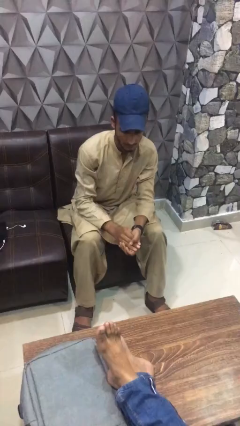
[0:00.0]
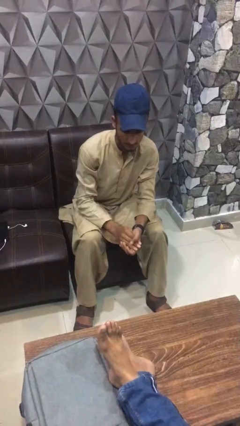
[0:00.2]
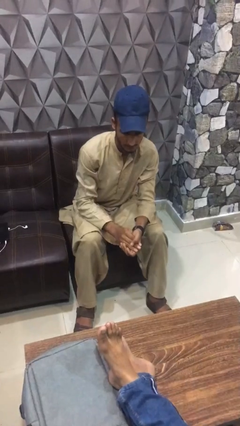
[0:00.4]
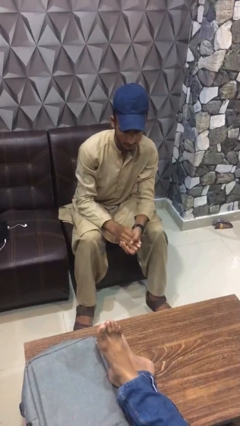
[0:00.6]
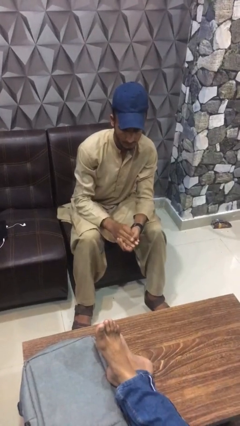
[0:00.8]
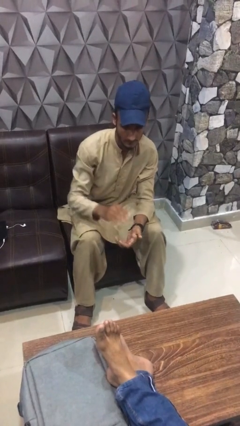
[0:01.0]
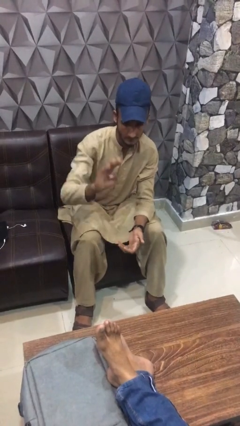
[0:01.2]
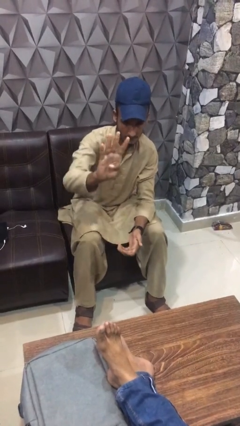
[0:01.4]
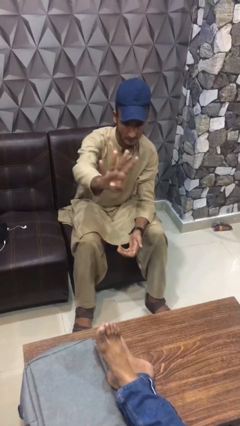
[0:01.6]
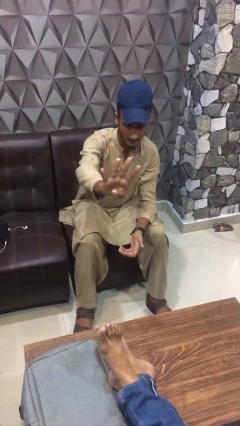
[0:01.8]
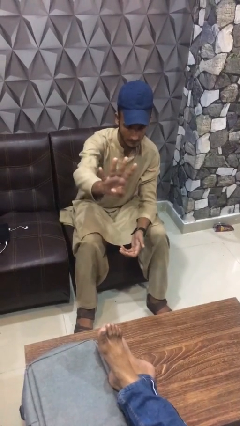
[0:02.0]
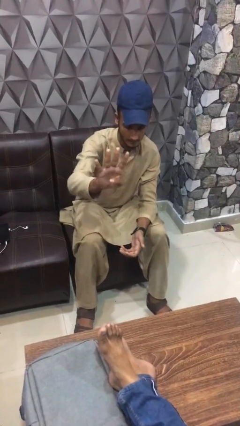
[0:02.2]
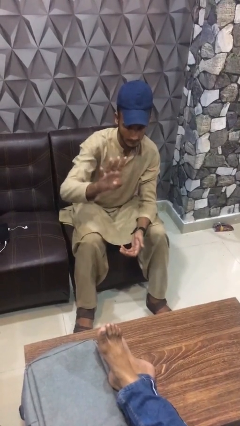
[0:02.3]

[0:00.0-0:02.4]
person gestures number four

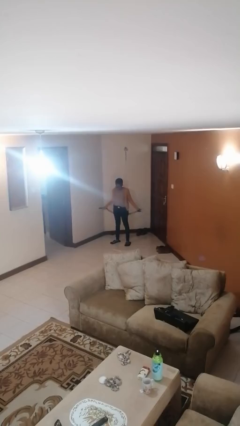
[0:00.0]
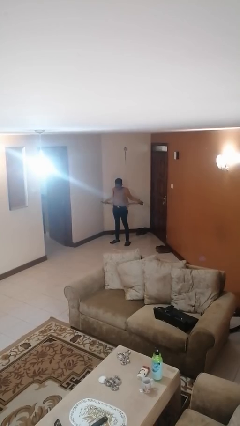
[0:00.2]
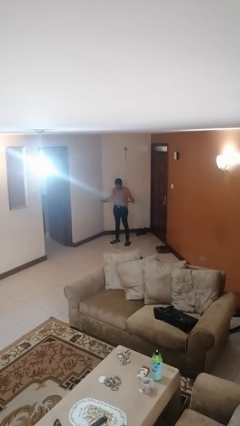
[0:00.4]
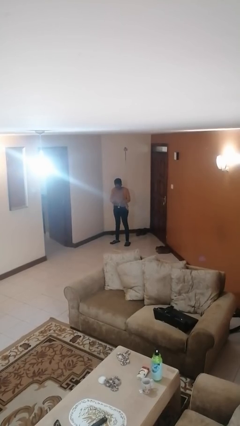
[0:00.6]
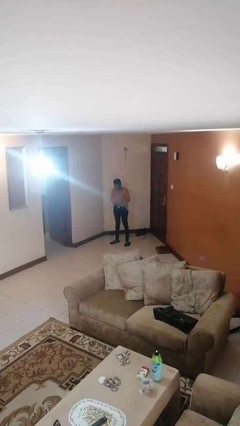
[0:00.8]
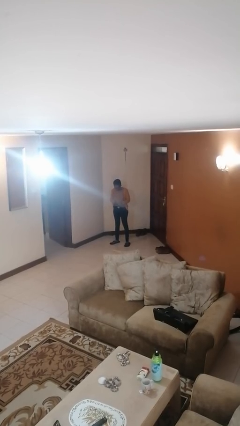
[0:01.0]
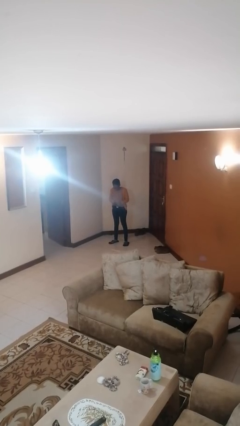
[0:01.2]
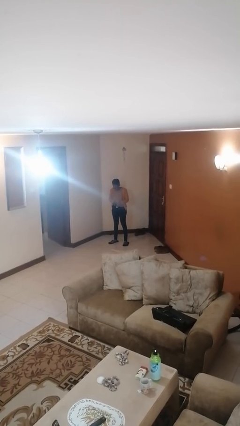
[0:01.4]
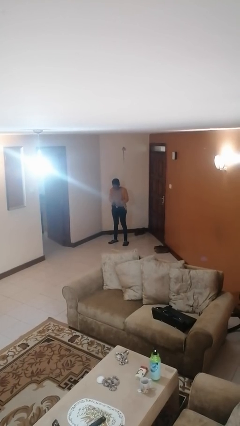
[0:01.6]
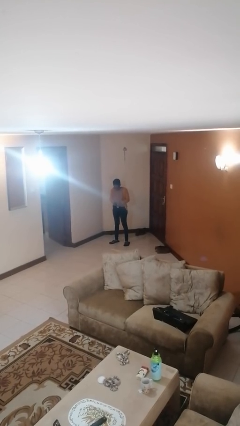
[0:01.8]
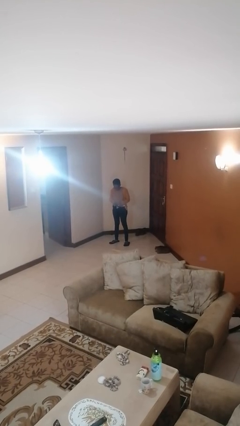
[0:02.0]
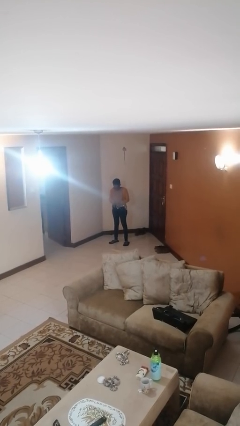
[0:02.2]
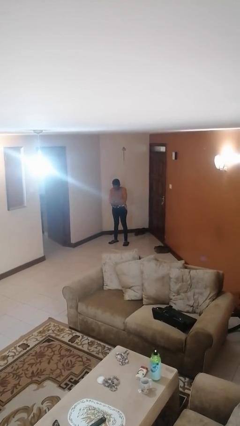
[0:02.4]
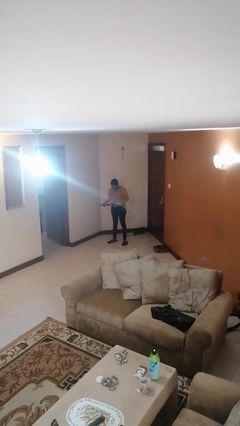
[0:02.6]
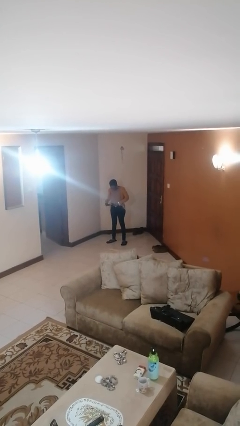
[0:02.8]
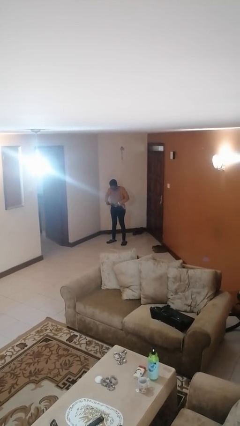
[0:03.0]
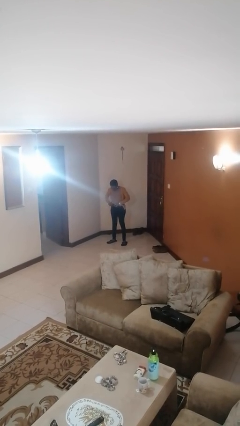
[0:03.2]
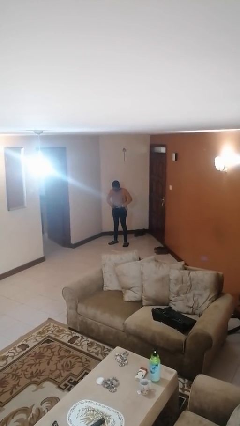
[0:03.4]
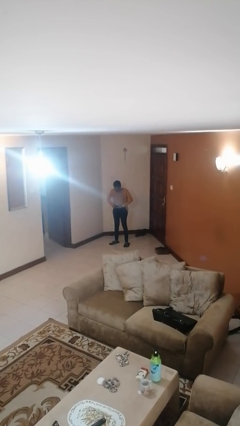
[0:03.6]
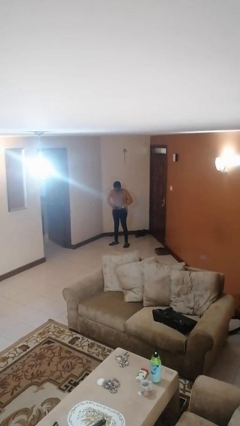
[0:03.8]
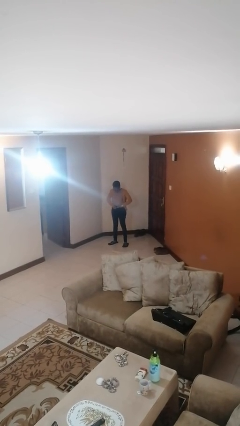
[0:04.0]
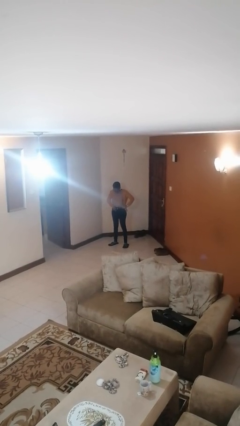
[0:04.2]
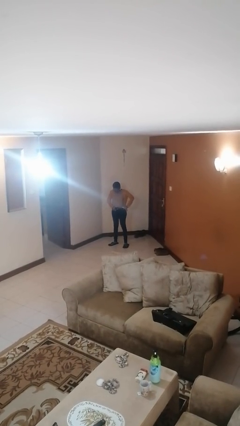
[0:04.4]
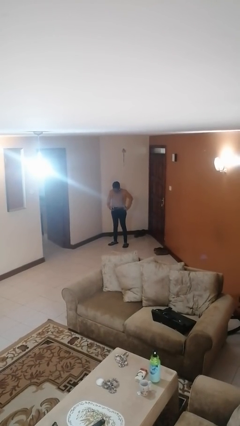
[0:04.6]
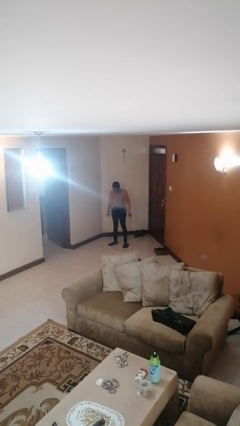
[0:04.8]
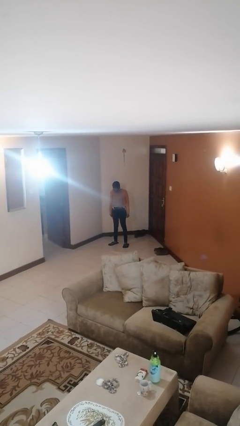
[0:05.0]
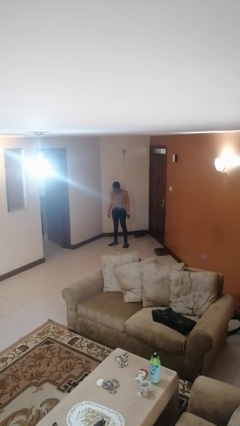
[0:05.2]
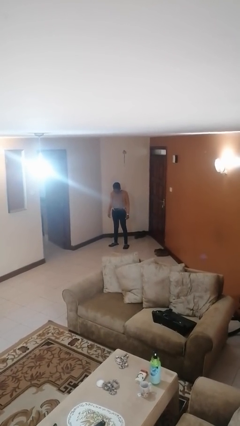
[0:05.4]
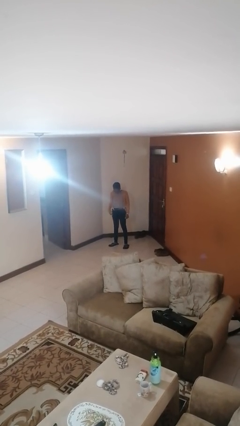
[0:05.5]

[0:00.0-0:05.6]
person puts on belt

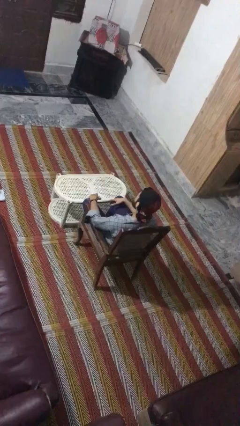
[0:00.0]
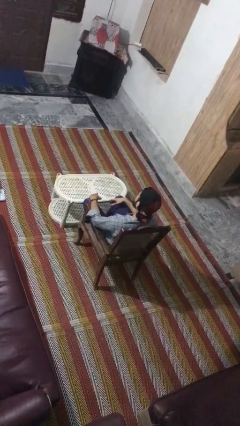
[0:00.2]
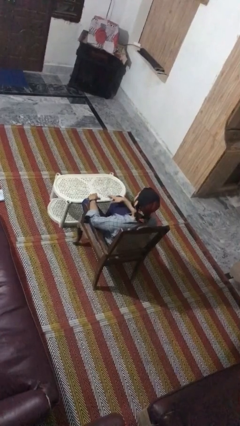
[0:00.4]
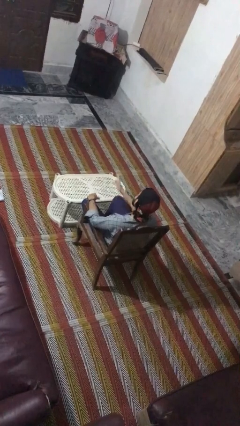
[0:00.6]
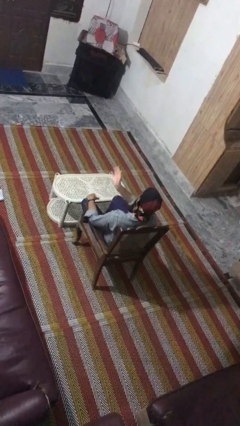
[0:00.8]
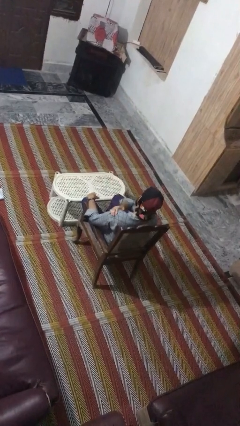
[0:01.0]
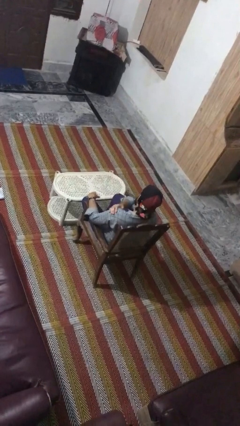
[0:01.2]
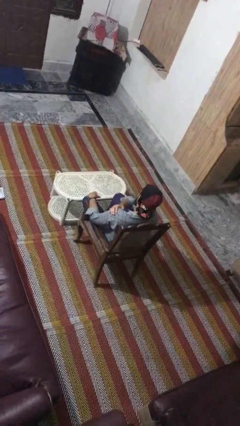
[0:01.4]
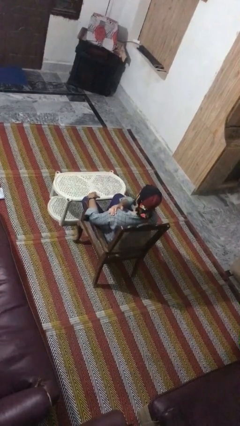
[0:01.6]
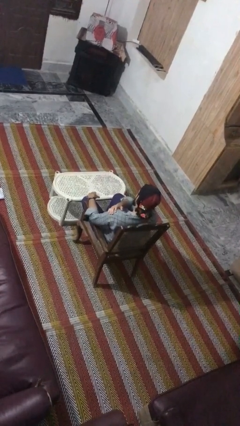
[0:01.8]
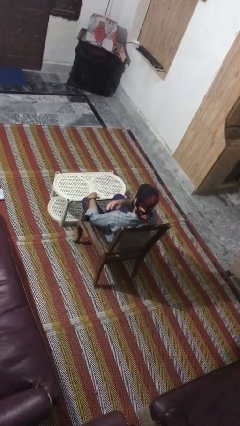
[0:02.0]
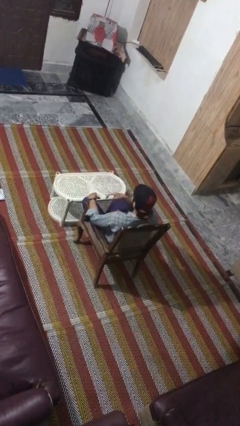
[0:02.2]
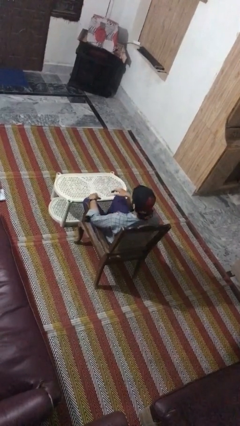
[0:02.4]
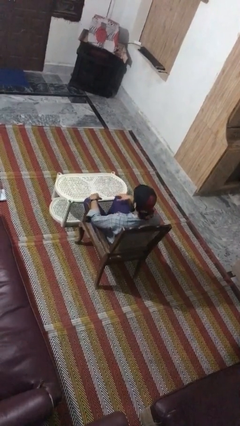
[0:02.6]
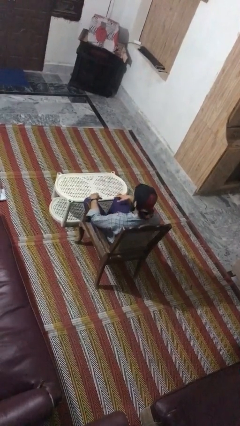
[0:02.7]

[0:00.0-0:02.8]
person swats bug

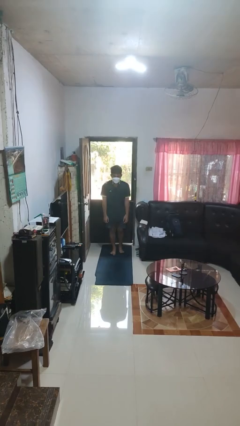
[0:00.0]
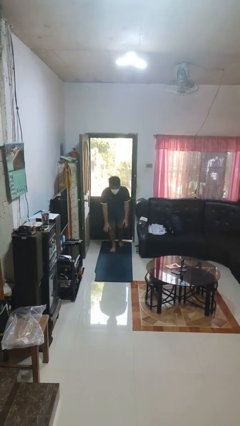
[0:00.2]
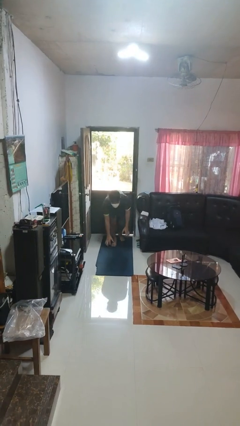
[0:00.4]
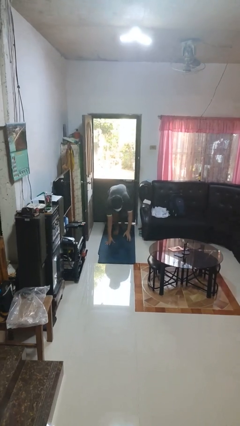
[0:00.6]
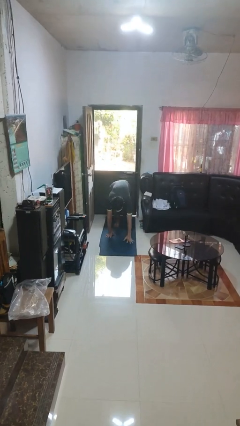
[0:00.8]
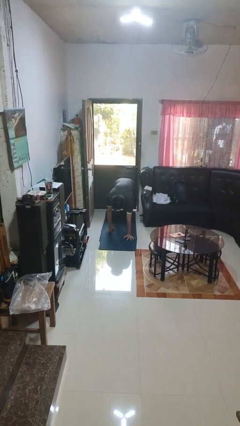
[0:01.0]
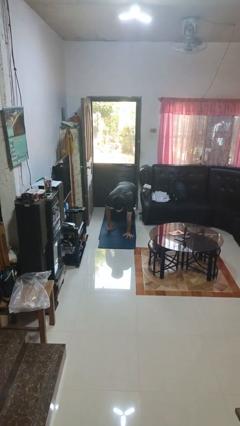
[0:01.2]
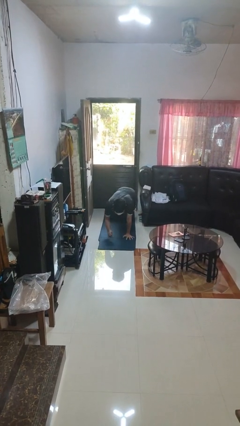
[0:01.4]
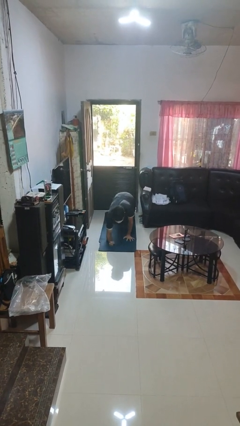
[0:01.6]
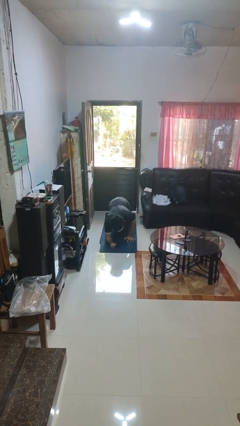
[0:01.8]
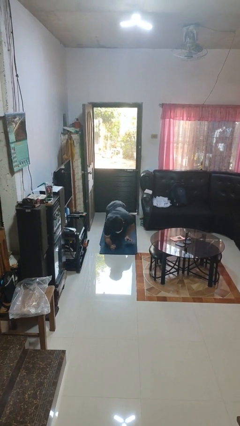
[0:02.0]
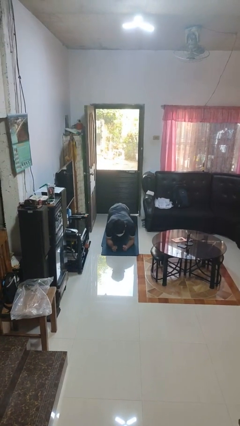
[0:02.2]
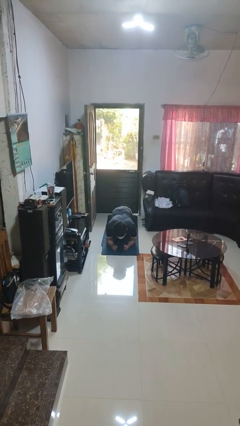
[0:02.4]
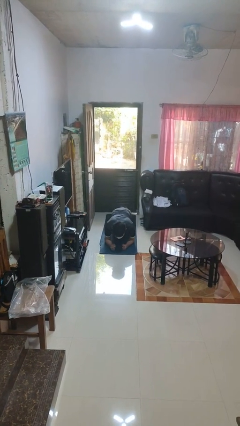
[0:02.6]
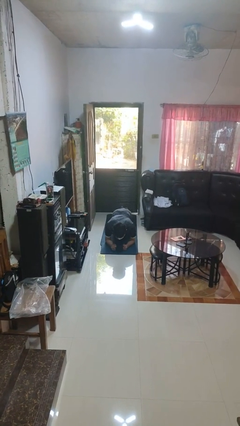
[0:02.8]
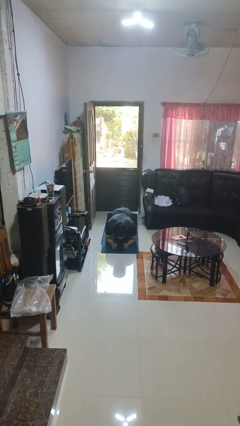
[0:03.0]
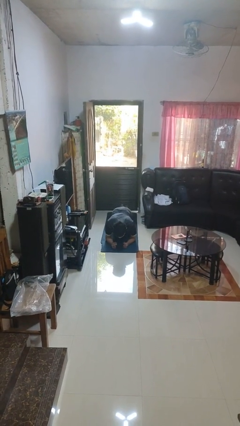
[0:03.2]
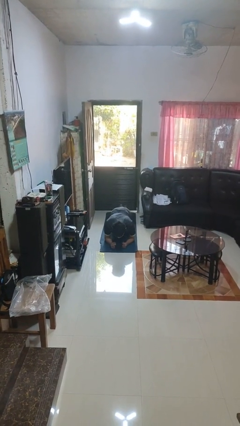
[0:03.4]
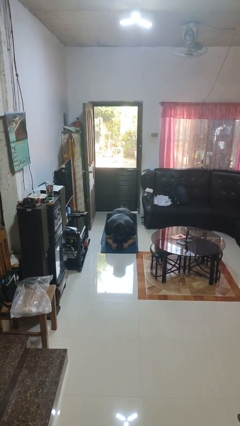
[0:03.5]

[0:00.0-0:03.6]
person exercises with plank

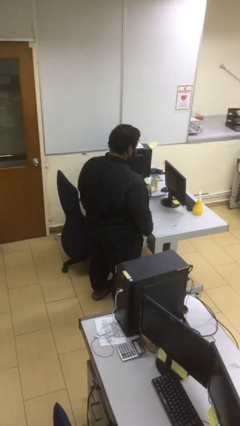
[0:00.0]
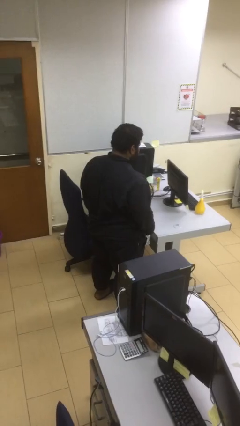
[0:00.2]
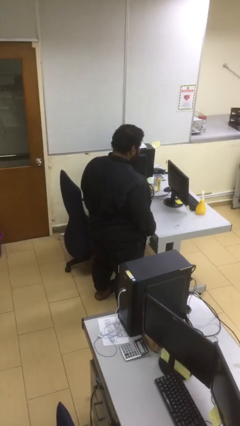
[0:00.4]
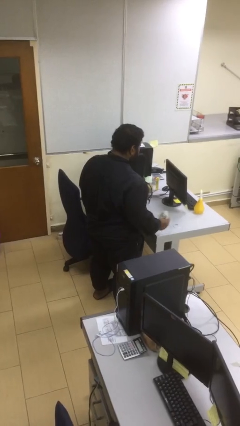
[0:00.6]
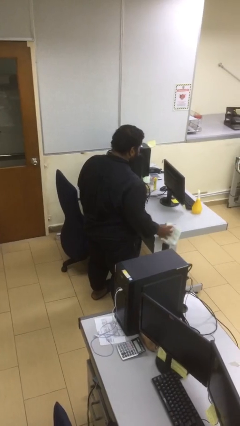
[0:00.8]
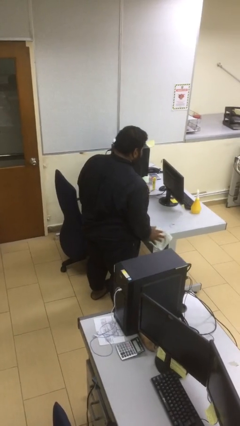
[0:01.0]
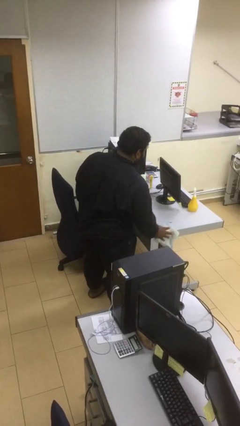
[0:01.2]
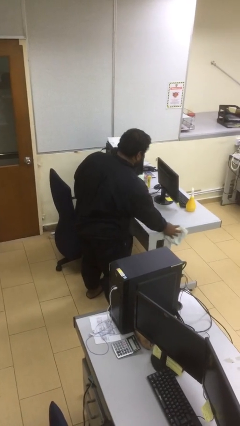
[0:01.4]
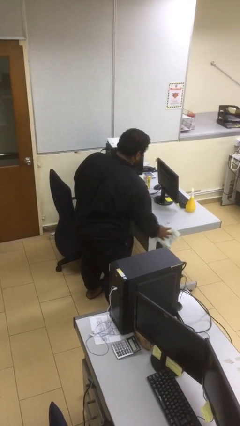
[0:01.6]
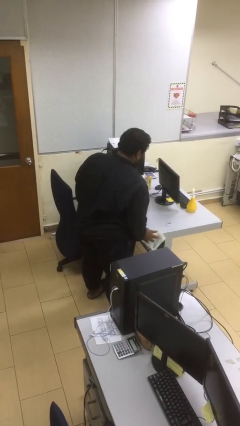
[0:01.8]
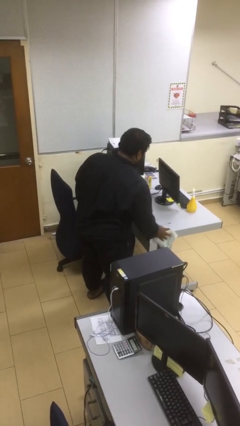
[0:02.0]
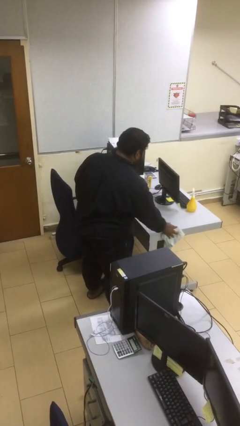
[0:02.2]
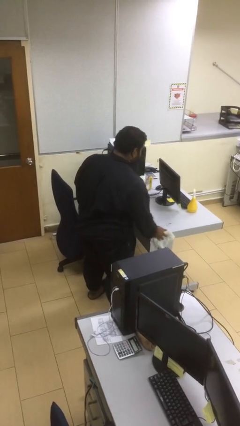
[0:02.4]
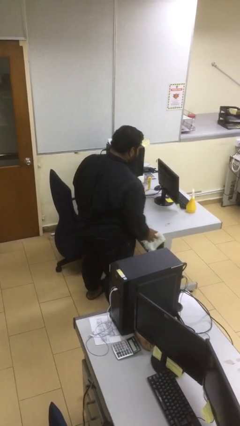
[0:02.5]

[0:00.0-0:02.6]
person cleans table with rag

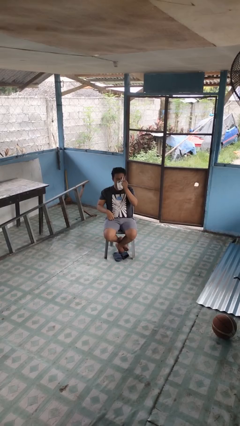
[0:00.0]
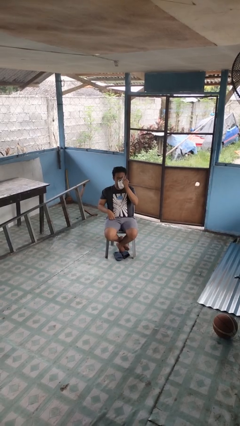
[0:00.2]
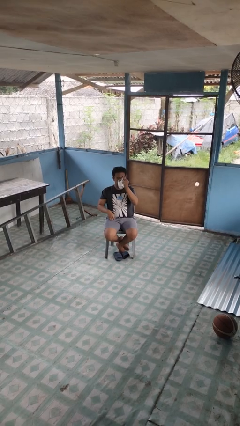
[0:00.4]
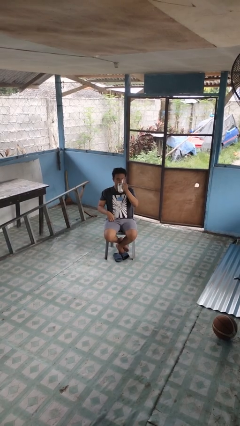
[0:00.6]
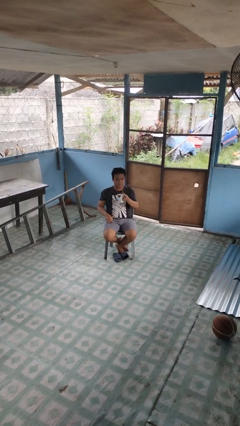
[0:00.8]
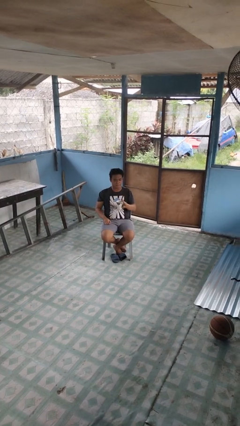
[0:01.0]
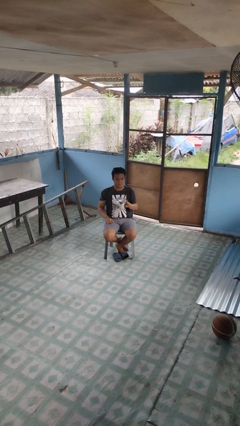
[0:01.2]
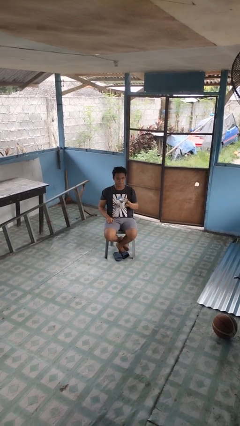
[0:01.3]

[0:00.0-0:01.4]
person drinks from mug
